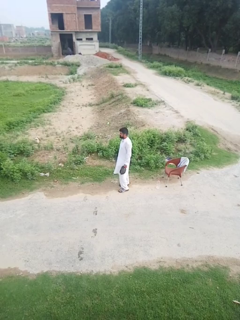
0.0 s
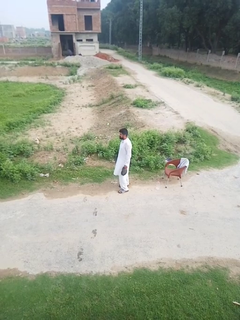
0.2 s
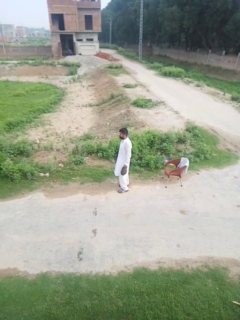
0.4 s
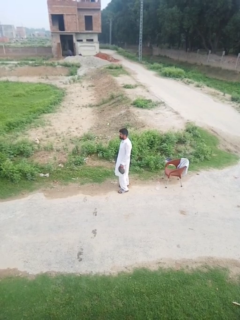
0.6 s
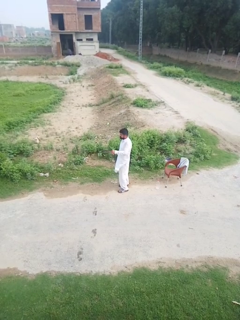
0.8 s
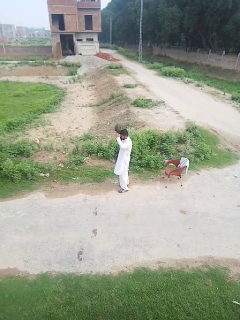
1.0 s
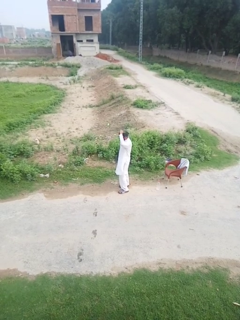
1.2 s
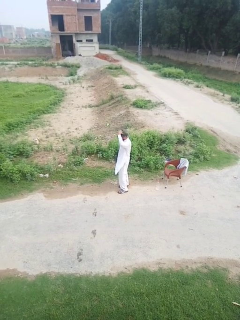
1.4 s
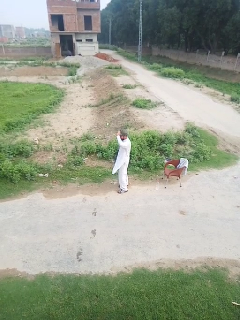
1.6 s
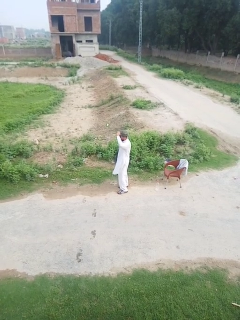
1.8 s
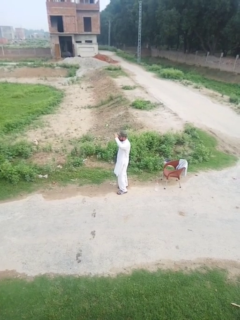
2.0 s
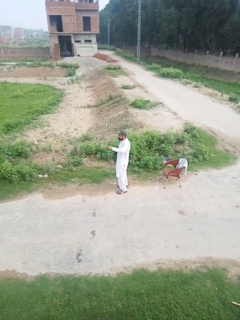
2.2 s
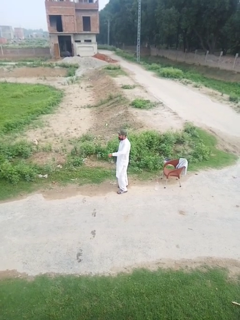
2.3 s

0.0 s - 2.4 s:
person puts on hat

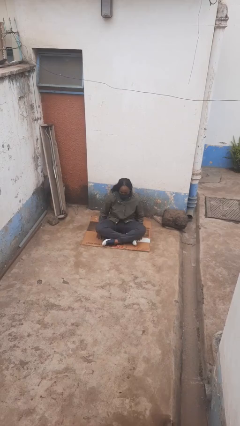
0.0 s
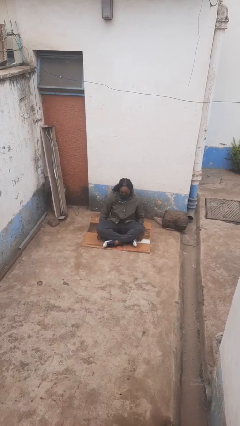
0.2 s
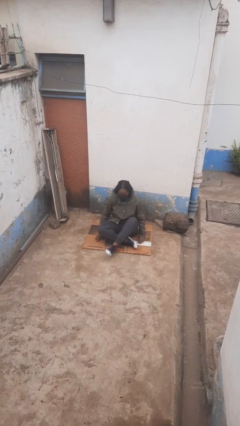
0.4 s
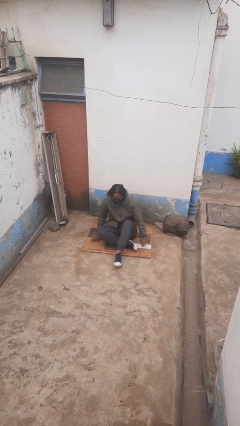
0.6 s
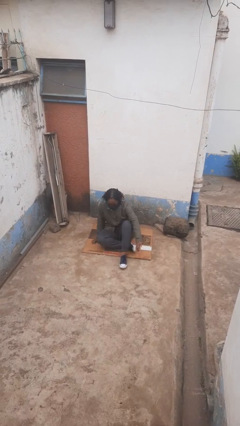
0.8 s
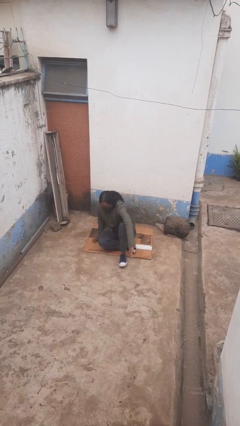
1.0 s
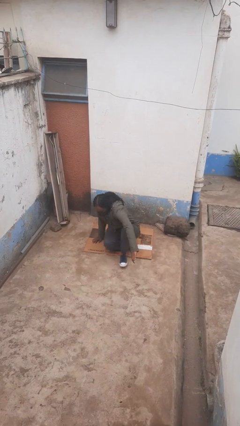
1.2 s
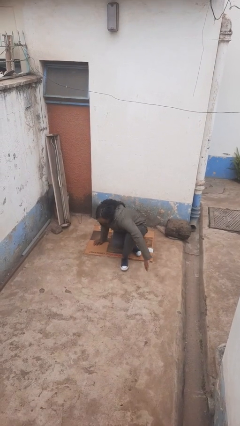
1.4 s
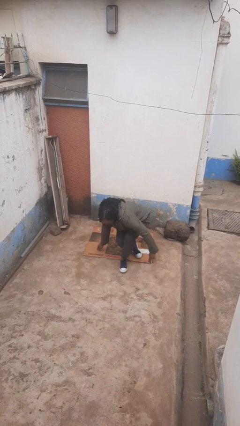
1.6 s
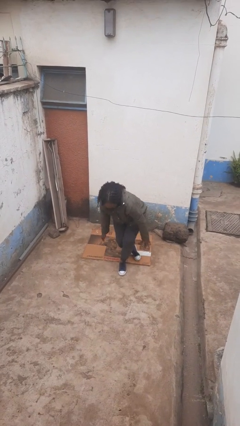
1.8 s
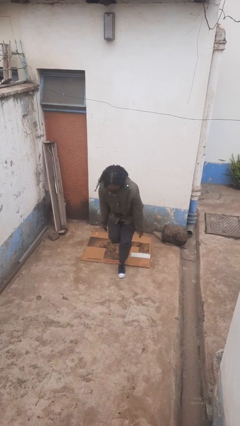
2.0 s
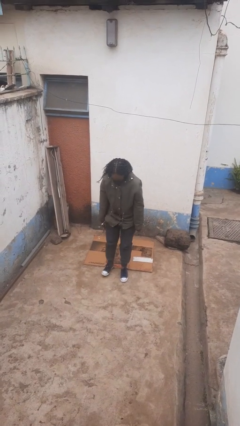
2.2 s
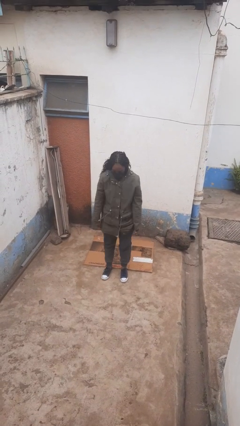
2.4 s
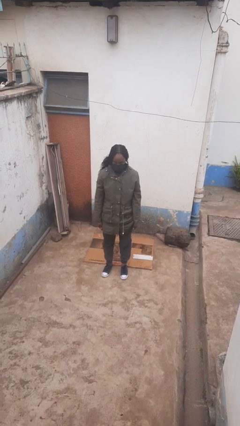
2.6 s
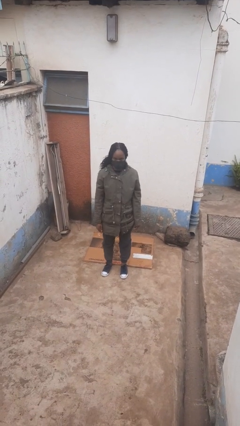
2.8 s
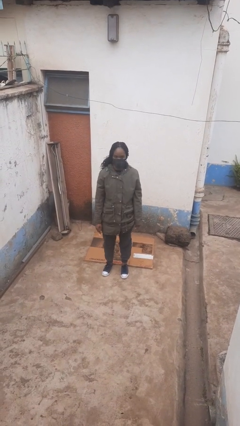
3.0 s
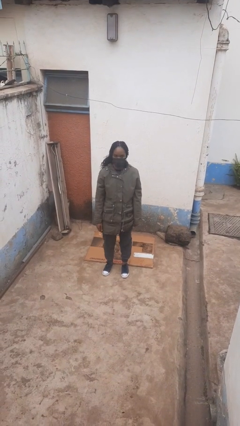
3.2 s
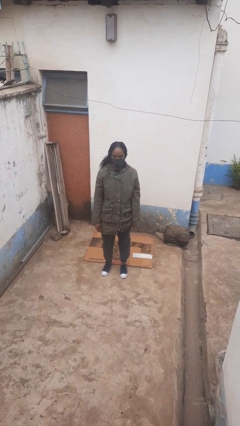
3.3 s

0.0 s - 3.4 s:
person stands up from floor

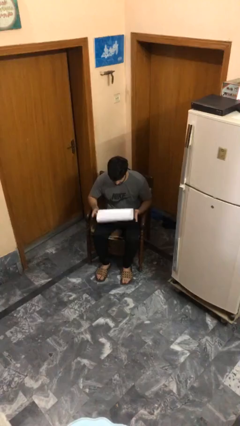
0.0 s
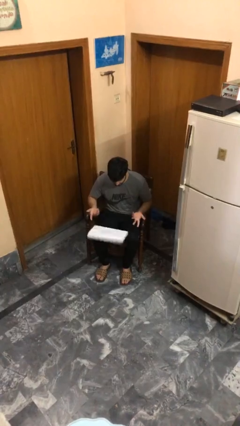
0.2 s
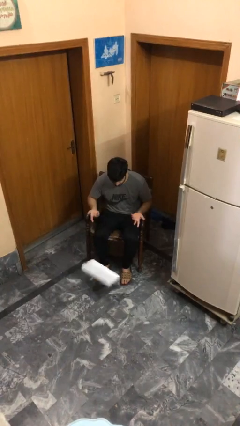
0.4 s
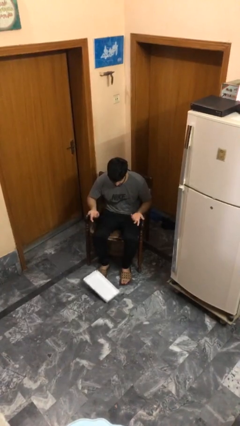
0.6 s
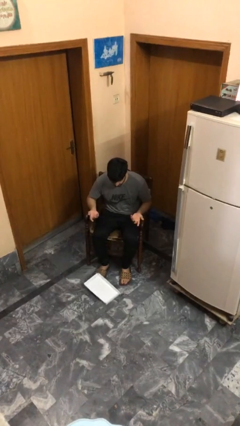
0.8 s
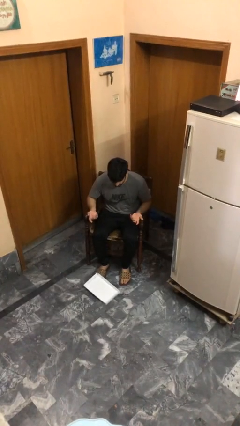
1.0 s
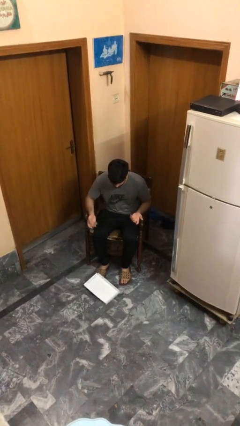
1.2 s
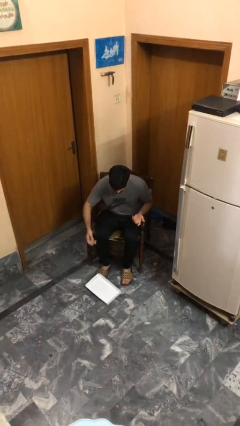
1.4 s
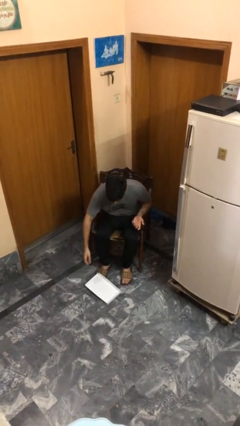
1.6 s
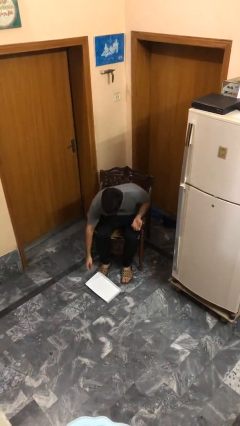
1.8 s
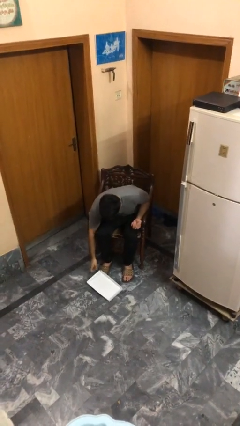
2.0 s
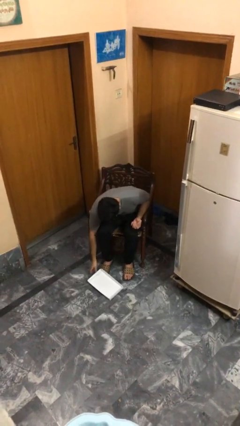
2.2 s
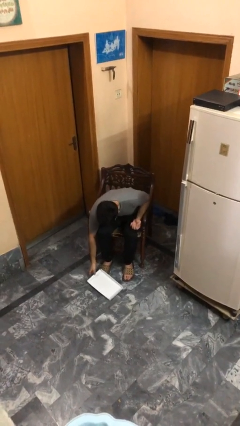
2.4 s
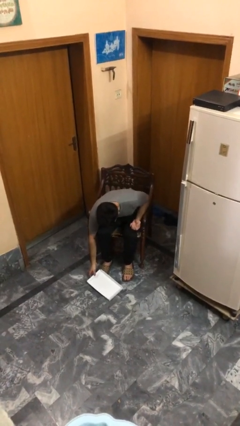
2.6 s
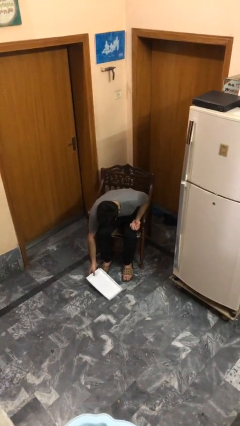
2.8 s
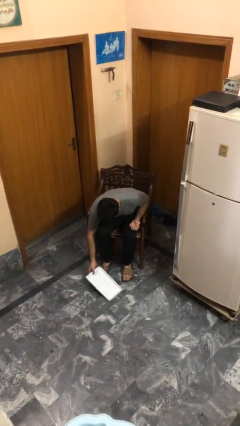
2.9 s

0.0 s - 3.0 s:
person drops object

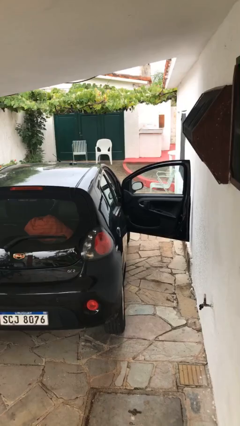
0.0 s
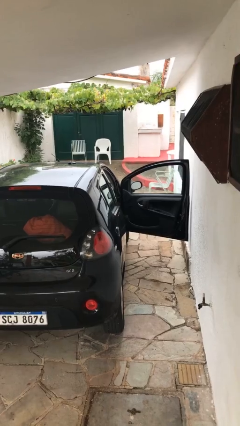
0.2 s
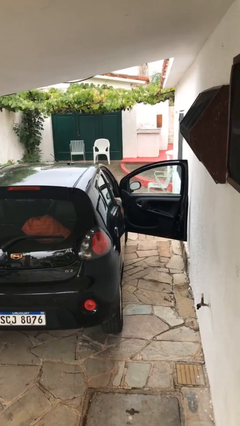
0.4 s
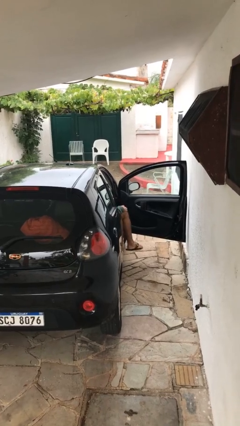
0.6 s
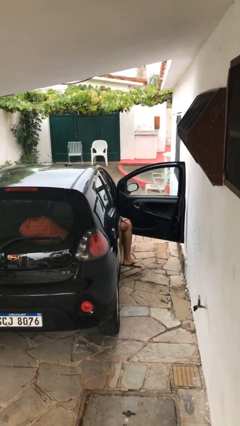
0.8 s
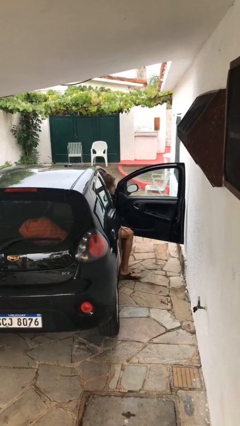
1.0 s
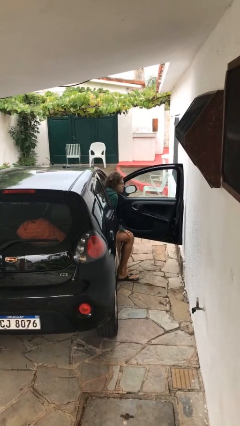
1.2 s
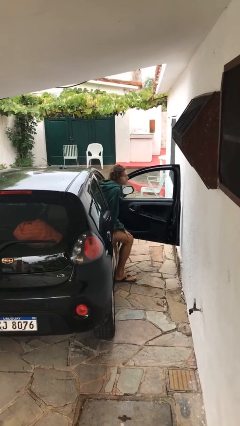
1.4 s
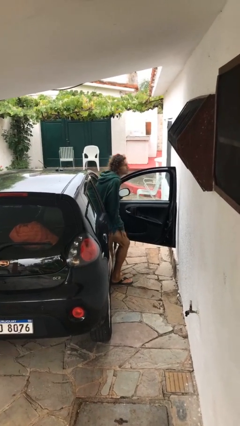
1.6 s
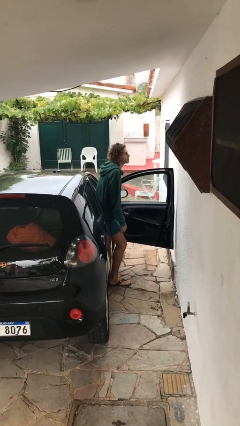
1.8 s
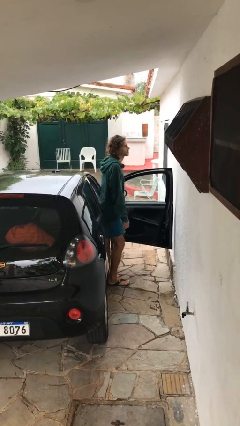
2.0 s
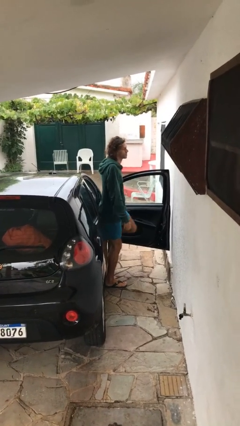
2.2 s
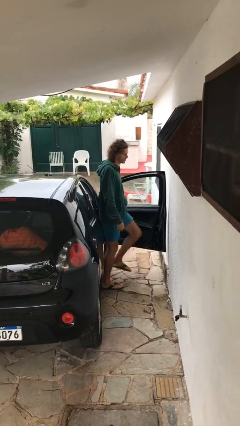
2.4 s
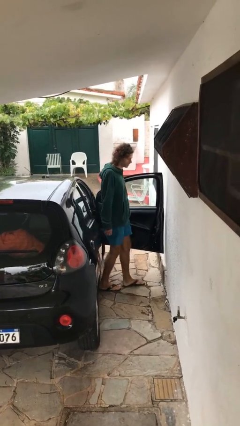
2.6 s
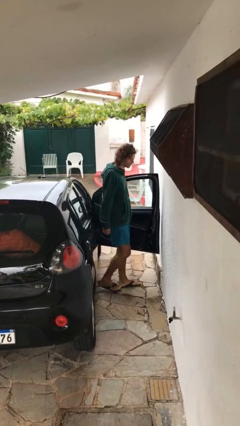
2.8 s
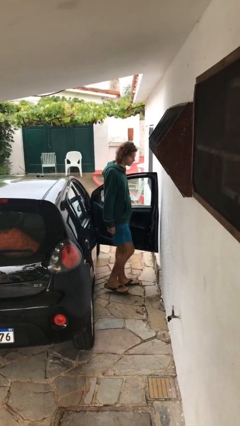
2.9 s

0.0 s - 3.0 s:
person exits car

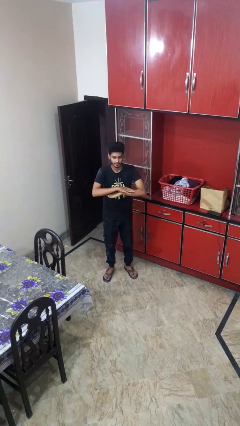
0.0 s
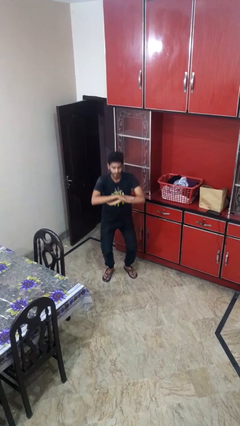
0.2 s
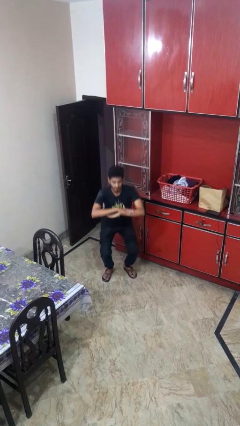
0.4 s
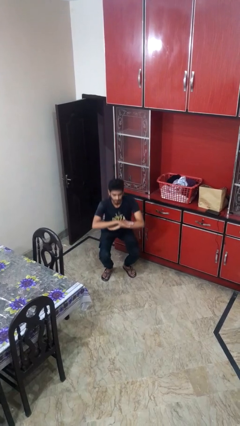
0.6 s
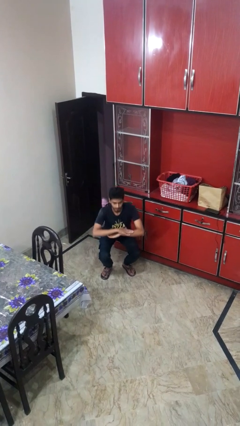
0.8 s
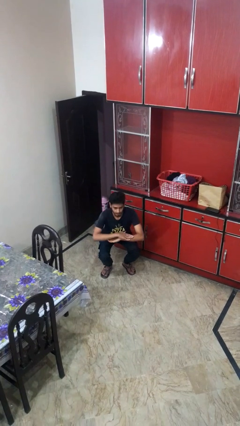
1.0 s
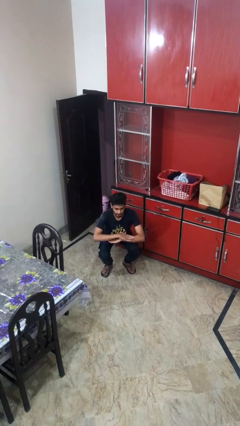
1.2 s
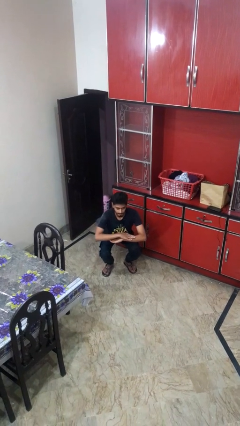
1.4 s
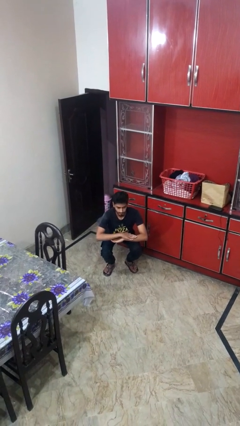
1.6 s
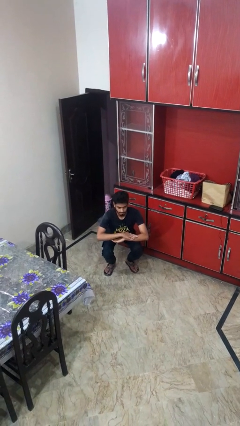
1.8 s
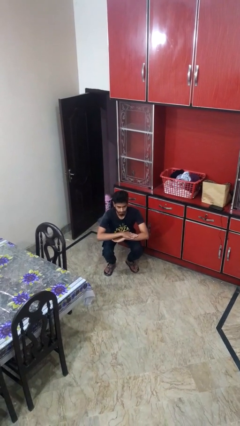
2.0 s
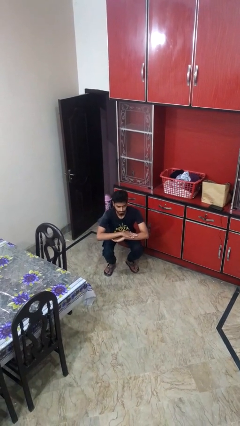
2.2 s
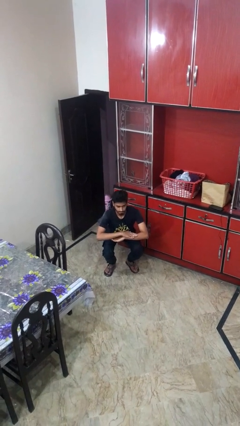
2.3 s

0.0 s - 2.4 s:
person squats

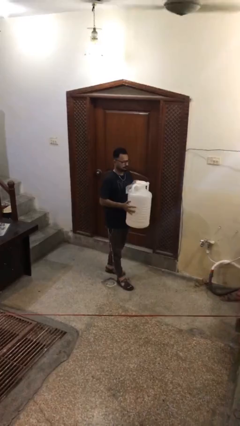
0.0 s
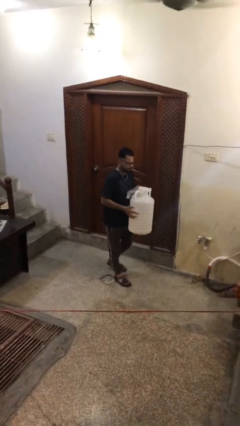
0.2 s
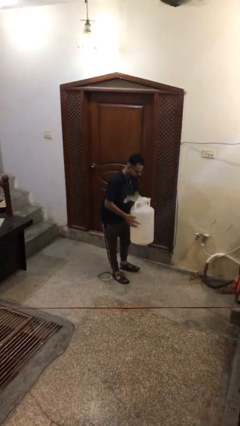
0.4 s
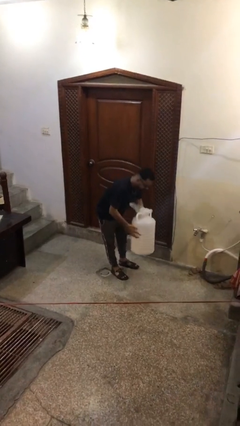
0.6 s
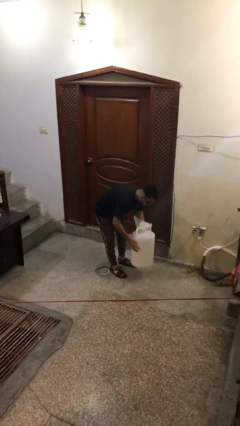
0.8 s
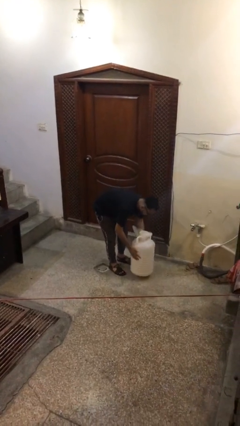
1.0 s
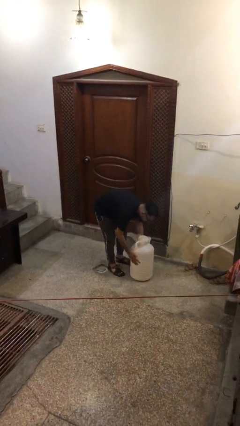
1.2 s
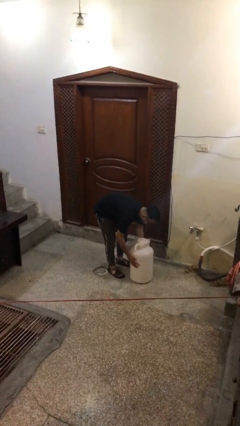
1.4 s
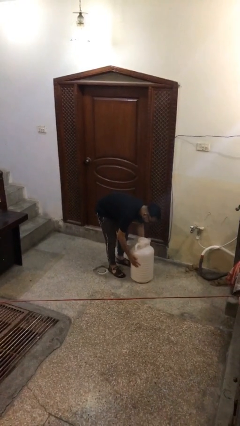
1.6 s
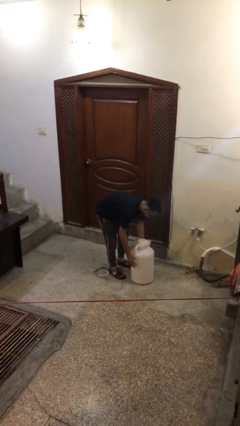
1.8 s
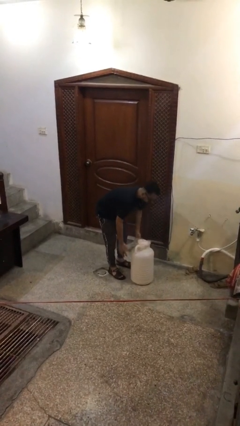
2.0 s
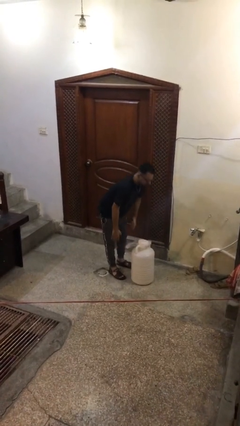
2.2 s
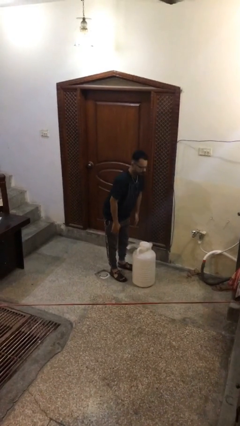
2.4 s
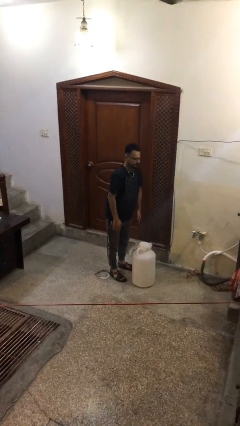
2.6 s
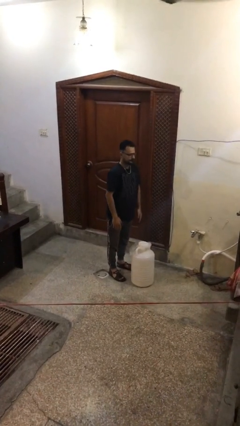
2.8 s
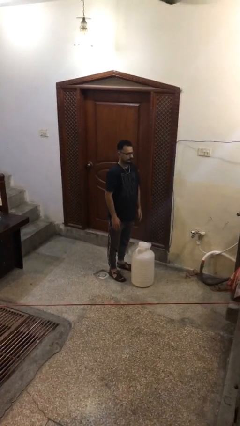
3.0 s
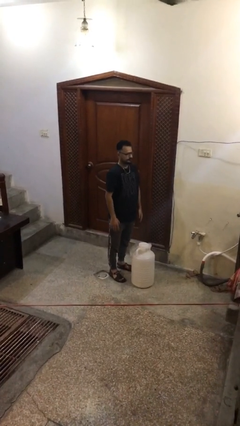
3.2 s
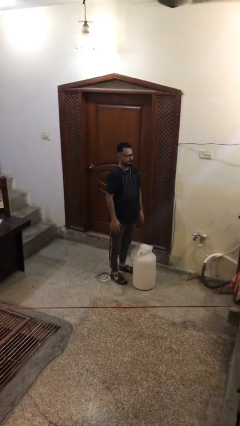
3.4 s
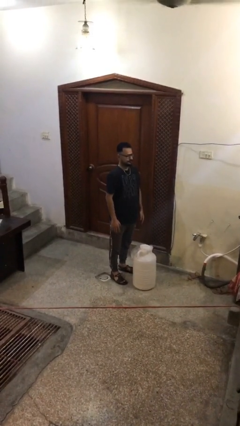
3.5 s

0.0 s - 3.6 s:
person puts down object on floor

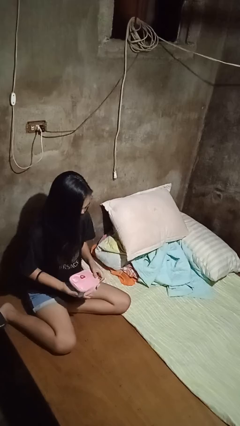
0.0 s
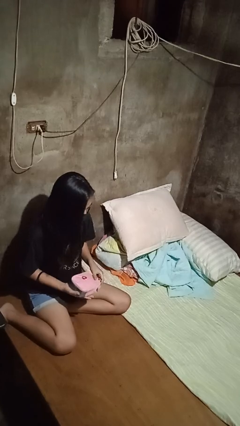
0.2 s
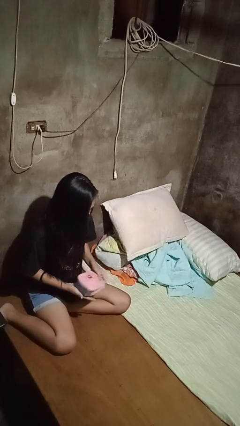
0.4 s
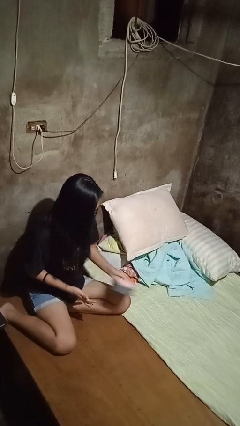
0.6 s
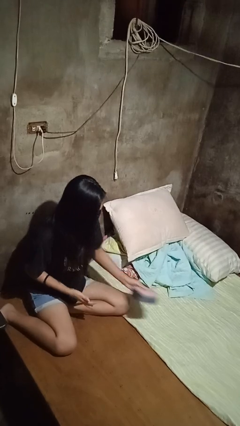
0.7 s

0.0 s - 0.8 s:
person puts down object on bed
